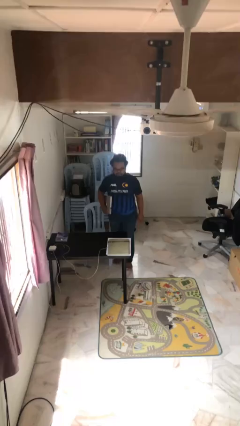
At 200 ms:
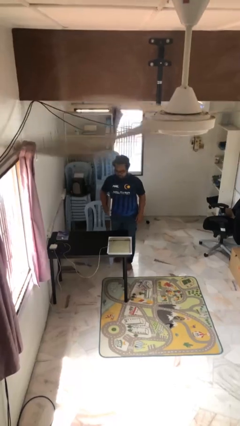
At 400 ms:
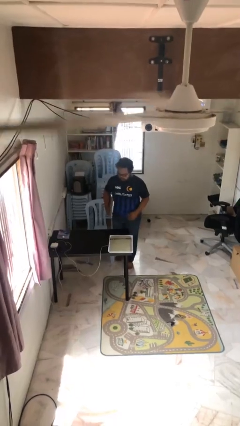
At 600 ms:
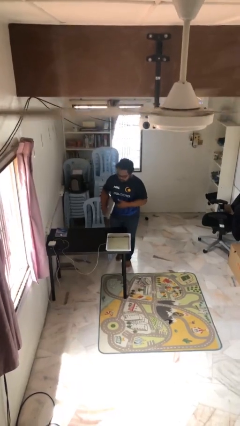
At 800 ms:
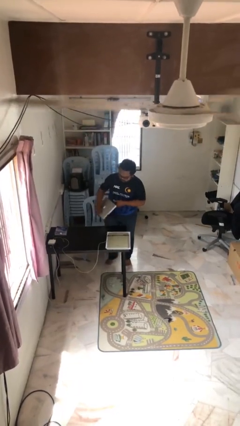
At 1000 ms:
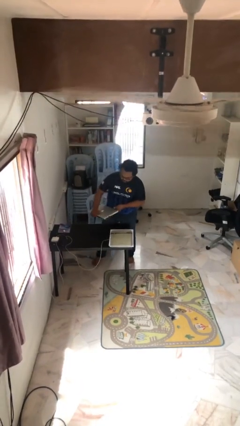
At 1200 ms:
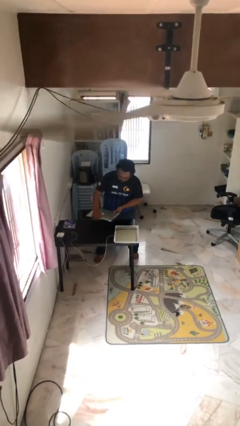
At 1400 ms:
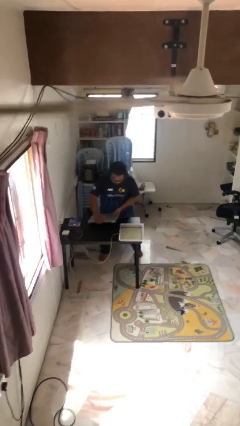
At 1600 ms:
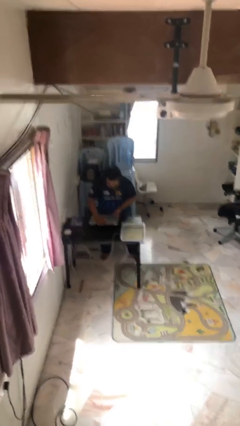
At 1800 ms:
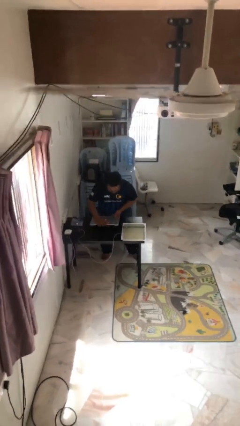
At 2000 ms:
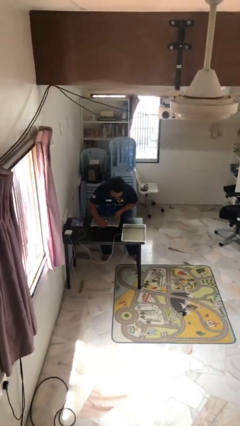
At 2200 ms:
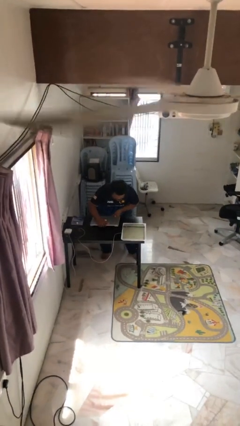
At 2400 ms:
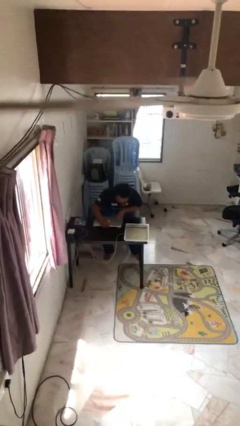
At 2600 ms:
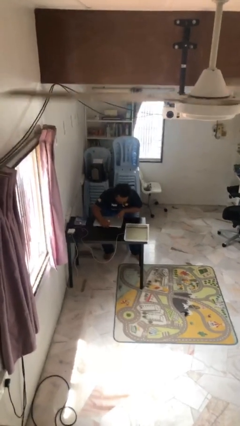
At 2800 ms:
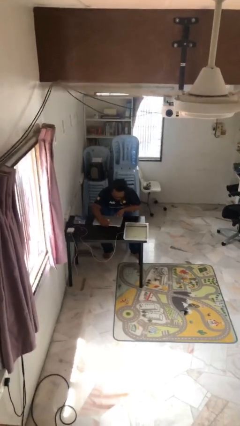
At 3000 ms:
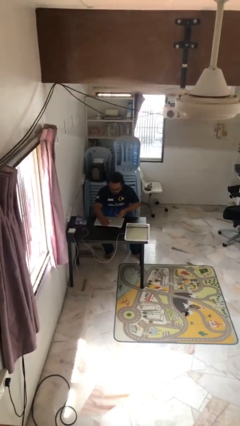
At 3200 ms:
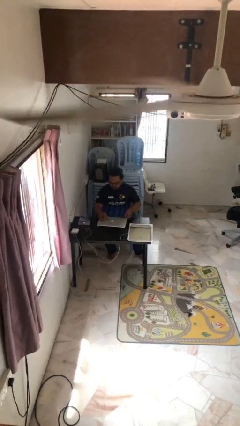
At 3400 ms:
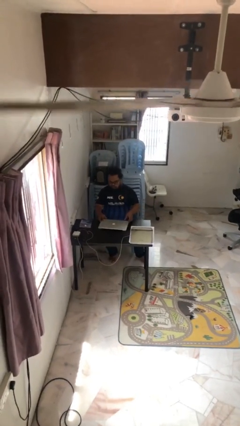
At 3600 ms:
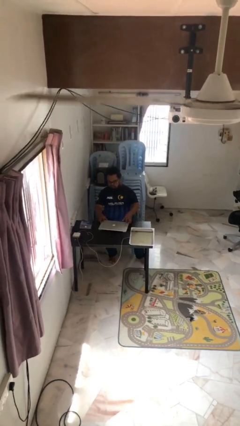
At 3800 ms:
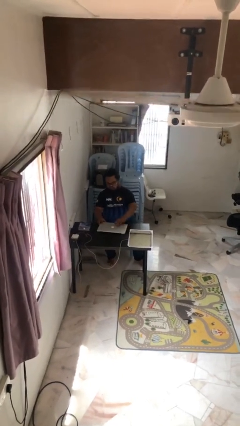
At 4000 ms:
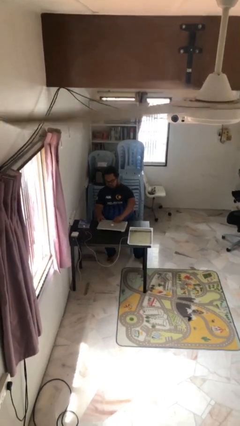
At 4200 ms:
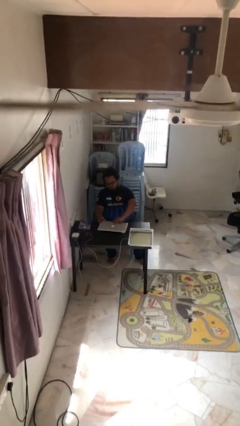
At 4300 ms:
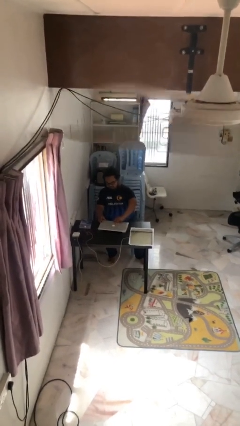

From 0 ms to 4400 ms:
person sits down

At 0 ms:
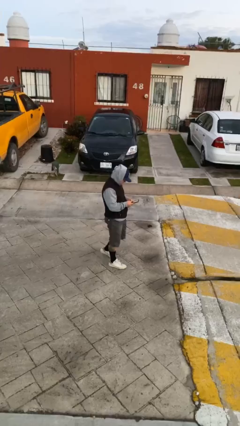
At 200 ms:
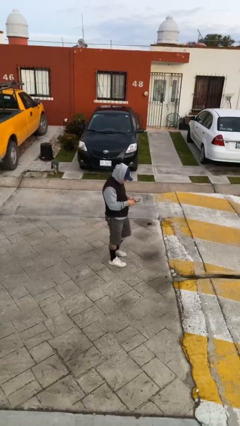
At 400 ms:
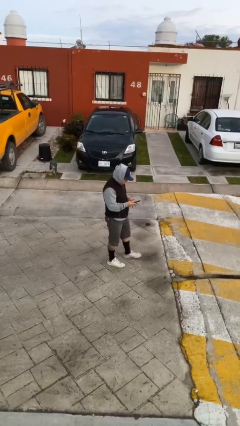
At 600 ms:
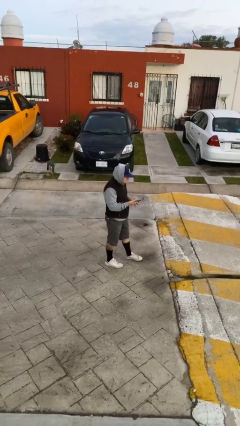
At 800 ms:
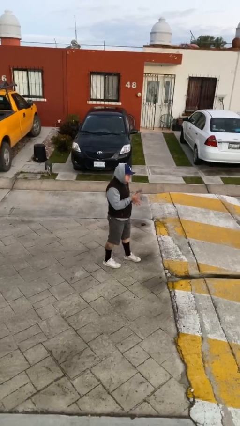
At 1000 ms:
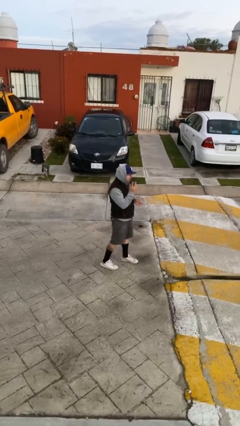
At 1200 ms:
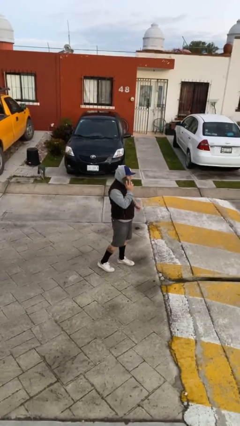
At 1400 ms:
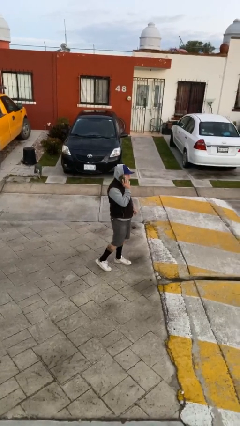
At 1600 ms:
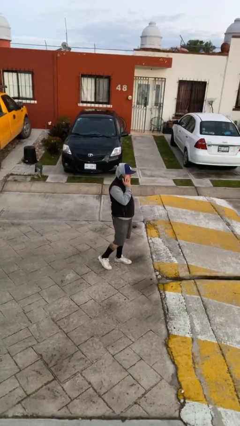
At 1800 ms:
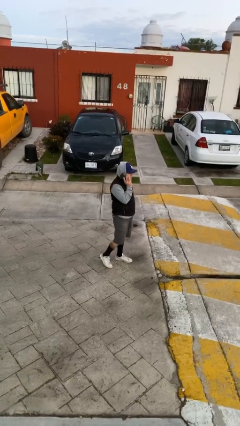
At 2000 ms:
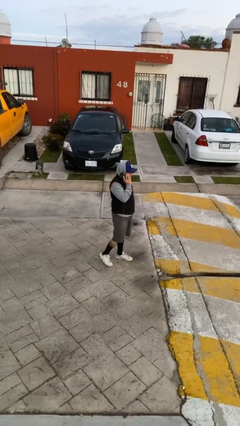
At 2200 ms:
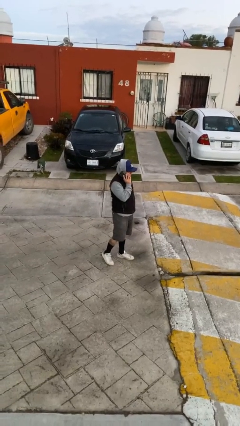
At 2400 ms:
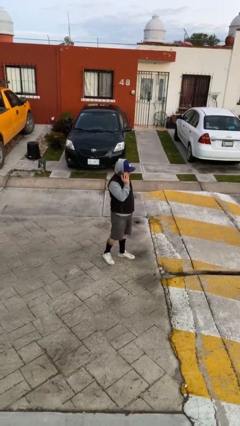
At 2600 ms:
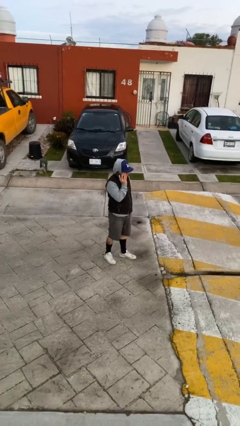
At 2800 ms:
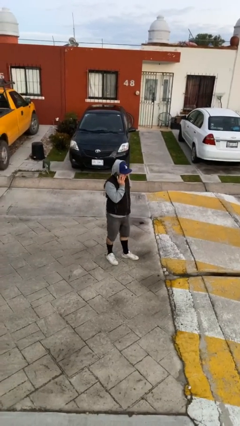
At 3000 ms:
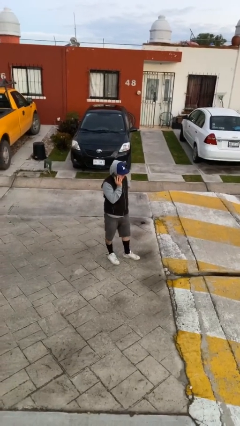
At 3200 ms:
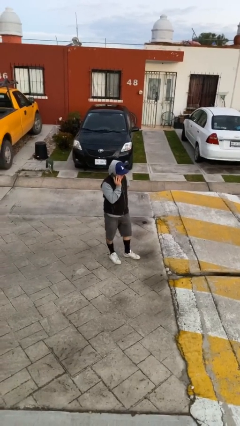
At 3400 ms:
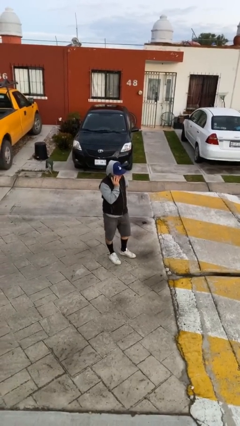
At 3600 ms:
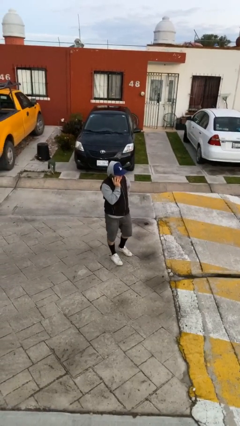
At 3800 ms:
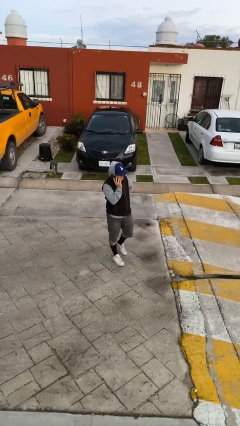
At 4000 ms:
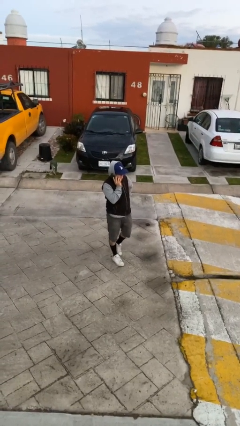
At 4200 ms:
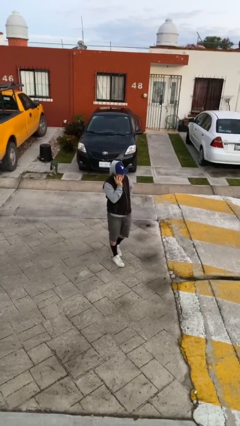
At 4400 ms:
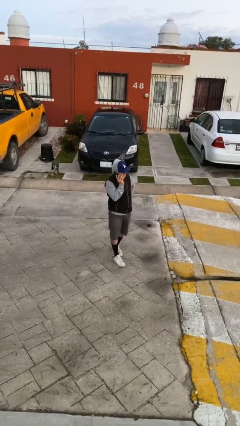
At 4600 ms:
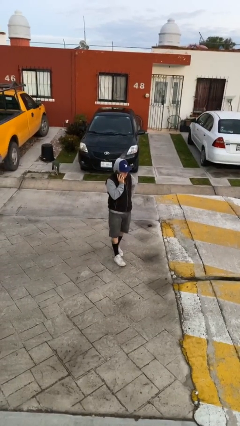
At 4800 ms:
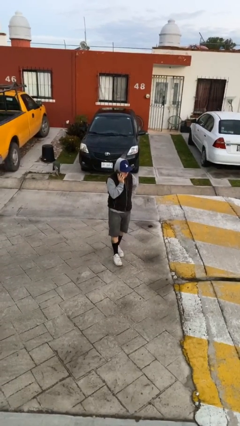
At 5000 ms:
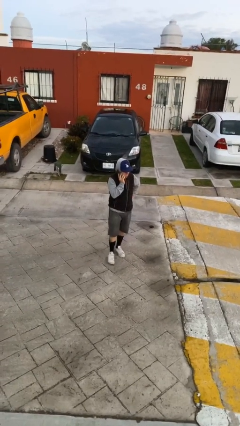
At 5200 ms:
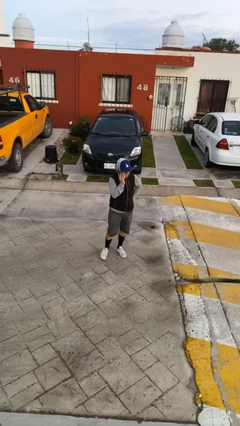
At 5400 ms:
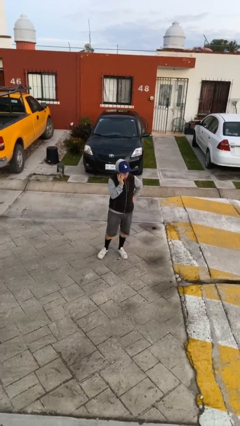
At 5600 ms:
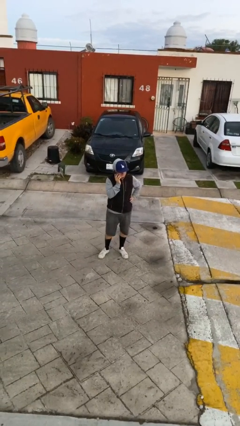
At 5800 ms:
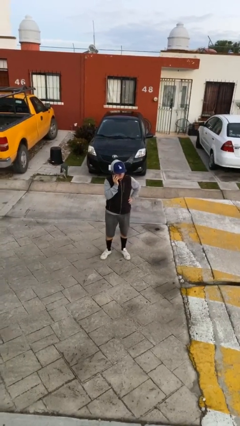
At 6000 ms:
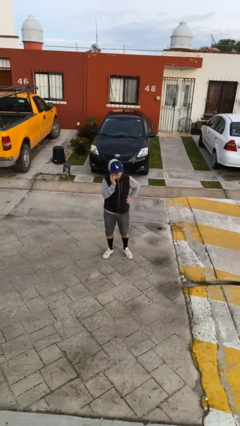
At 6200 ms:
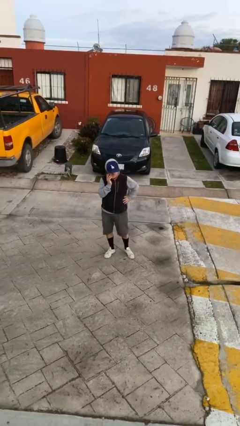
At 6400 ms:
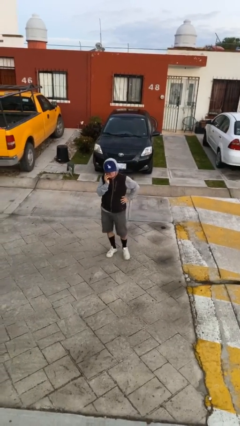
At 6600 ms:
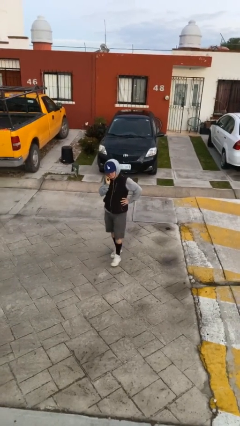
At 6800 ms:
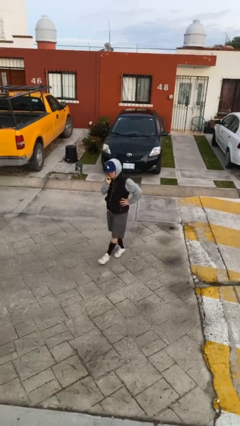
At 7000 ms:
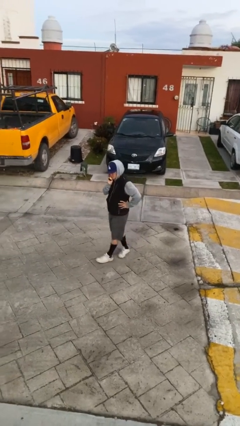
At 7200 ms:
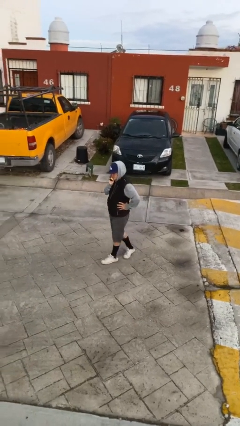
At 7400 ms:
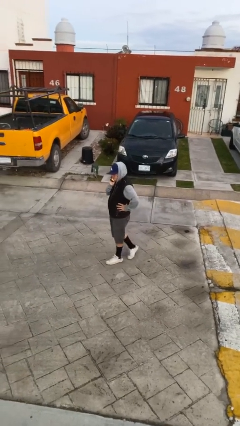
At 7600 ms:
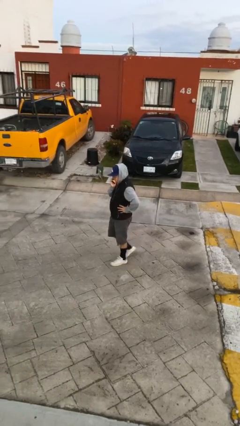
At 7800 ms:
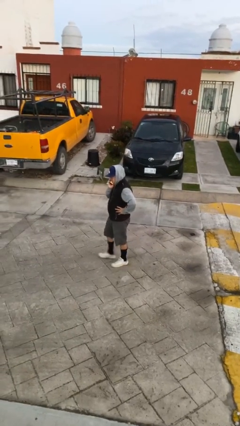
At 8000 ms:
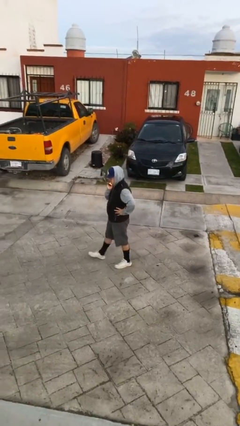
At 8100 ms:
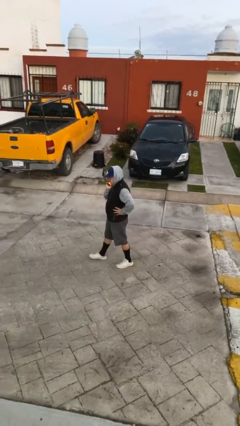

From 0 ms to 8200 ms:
person talks on phone

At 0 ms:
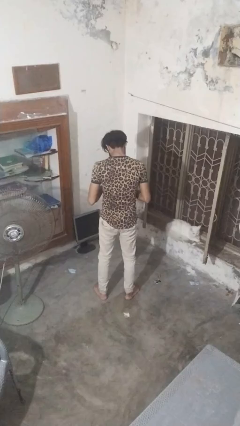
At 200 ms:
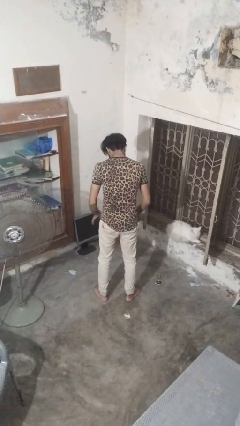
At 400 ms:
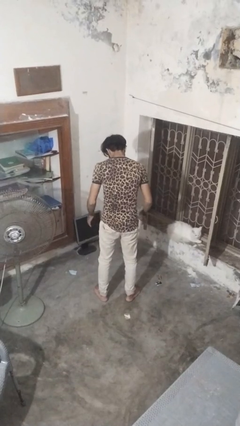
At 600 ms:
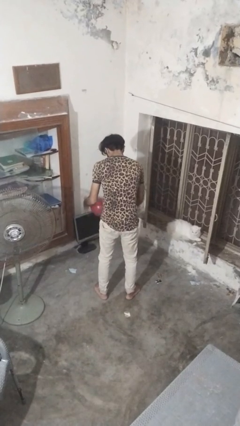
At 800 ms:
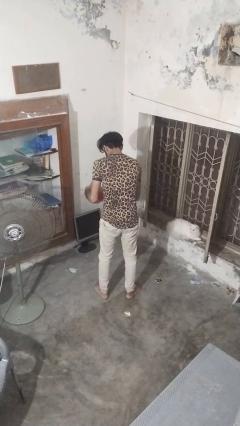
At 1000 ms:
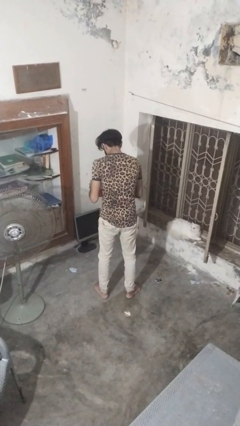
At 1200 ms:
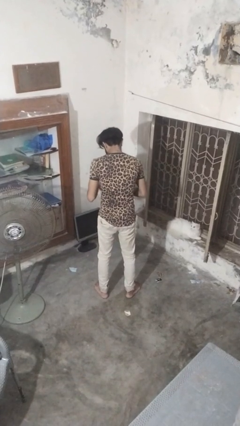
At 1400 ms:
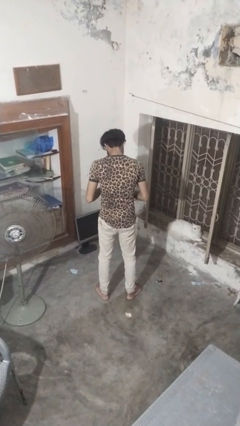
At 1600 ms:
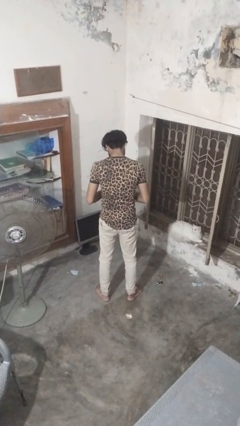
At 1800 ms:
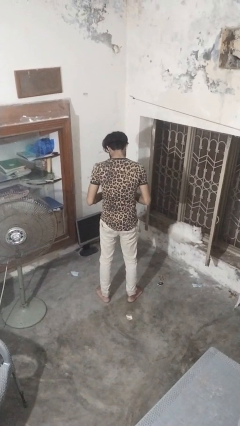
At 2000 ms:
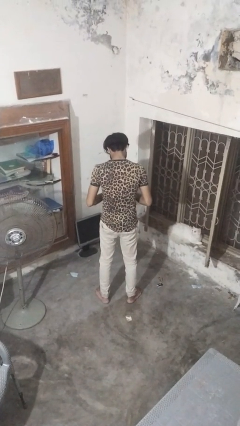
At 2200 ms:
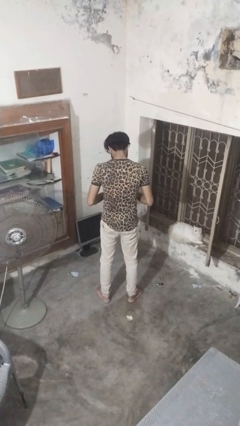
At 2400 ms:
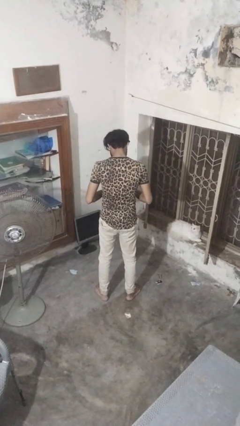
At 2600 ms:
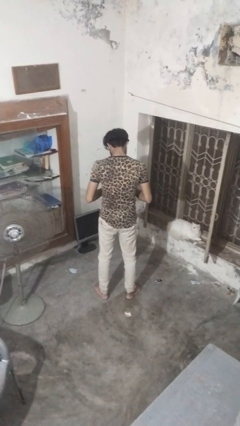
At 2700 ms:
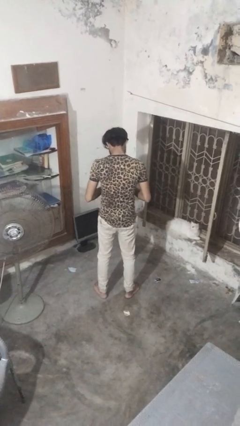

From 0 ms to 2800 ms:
person bounces ball on floor

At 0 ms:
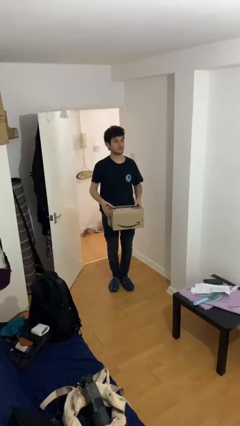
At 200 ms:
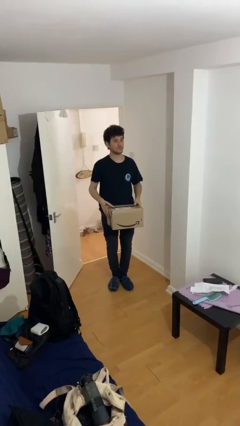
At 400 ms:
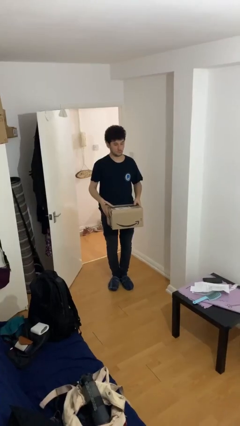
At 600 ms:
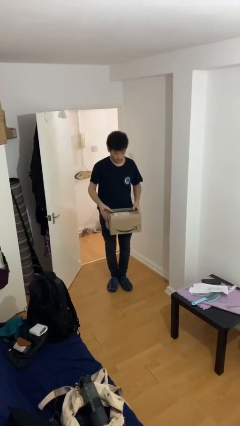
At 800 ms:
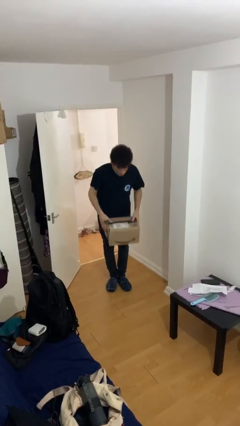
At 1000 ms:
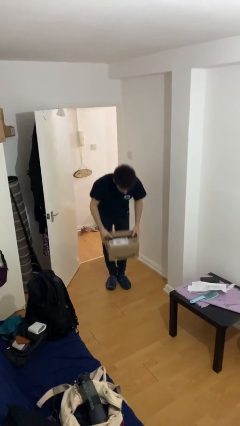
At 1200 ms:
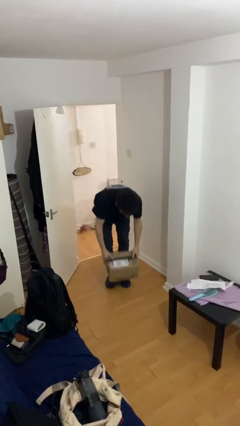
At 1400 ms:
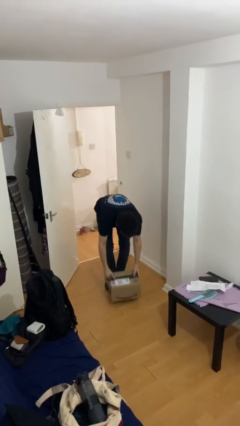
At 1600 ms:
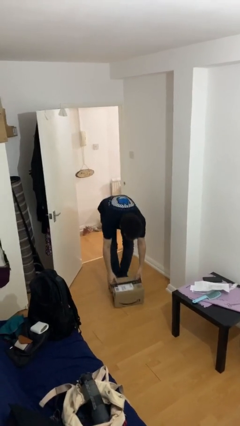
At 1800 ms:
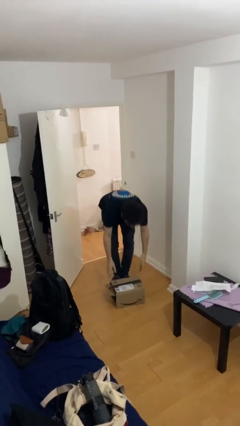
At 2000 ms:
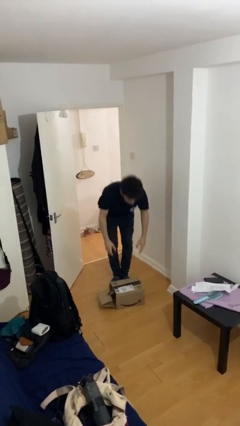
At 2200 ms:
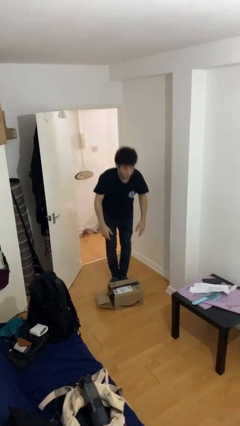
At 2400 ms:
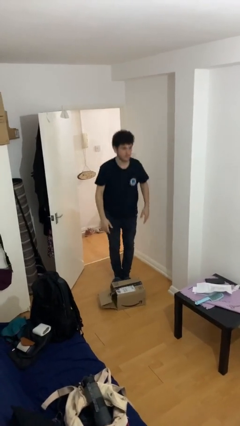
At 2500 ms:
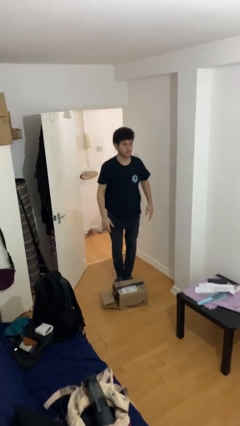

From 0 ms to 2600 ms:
person puts down object on floor
